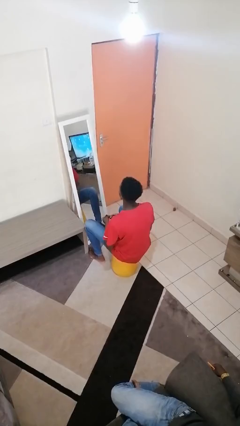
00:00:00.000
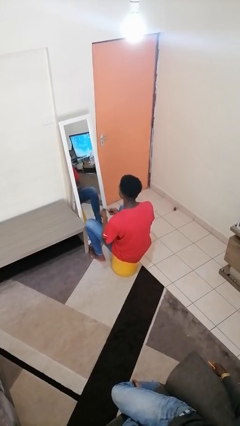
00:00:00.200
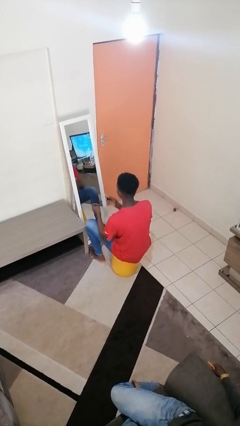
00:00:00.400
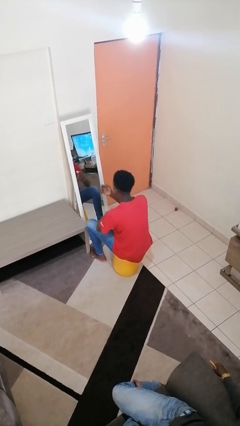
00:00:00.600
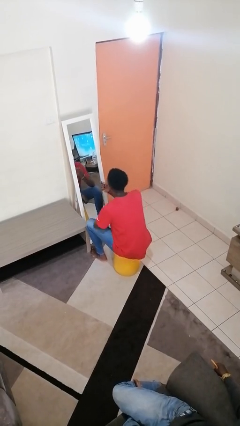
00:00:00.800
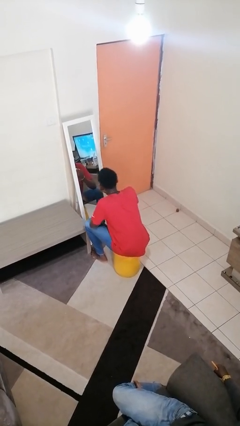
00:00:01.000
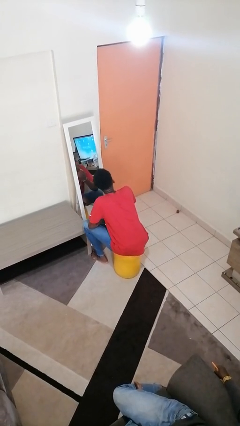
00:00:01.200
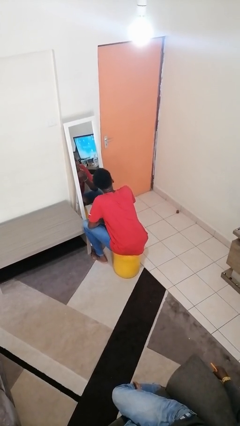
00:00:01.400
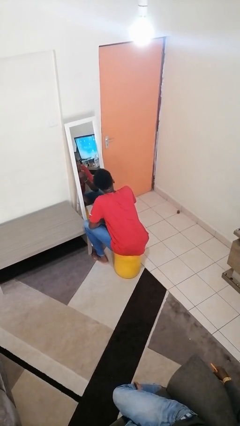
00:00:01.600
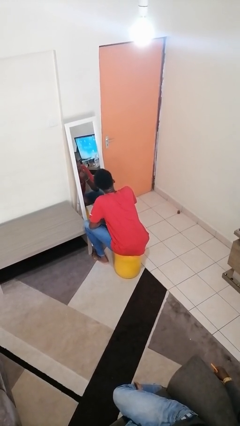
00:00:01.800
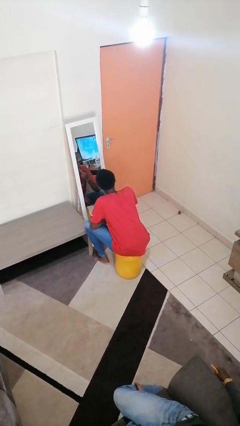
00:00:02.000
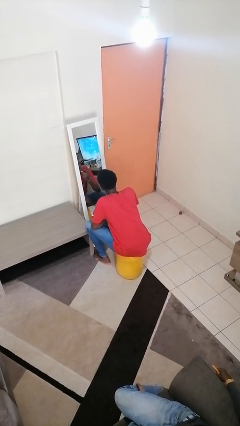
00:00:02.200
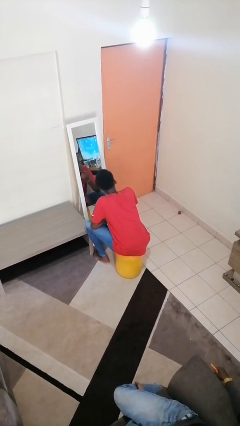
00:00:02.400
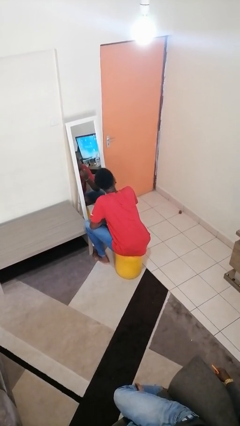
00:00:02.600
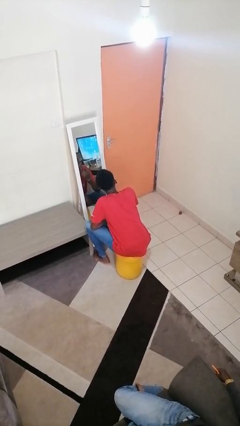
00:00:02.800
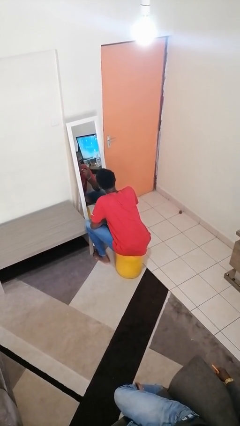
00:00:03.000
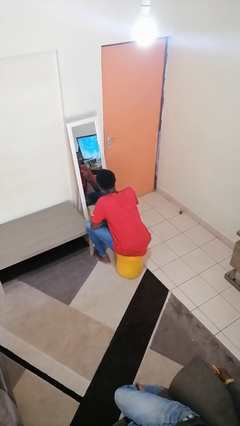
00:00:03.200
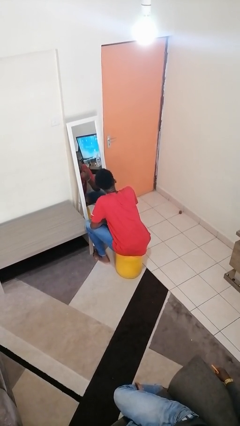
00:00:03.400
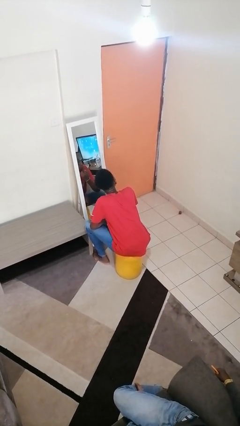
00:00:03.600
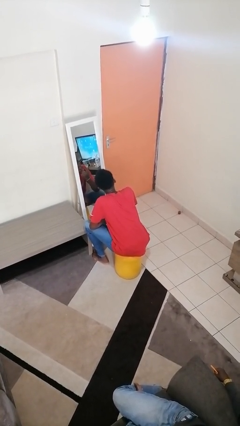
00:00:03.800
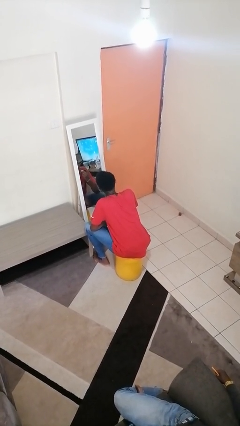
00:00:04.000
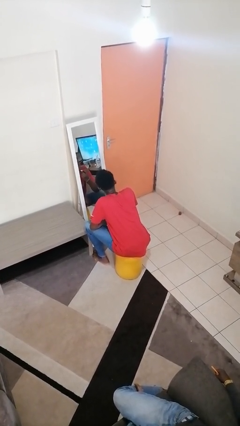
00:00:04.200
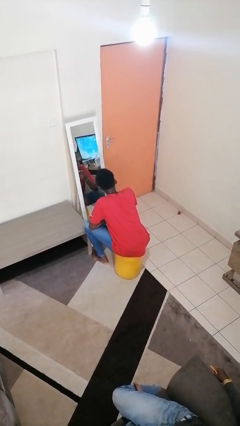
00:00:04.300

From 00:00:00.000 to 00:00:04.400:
person applies lip makeup

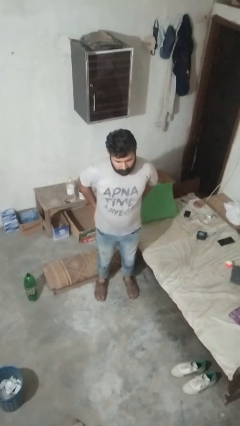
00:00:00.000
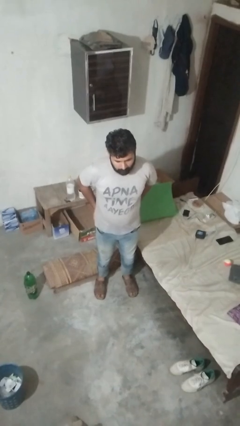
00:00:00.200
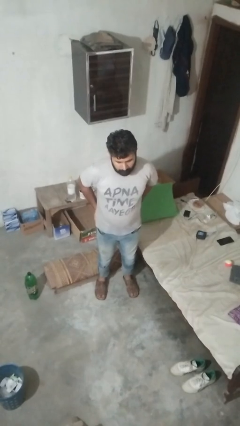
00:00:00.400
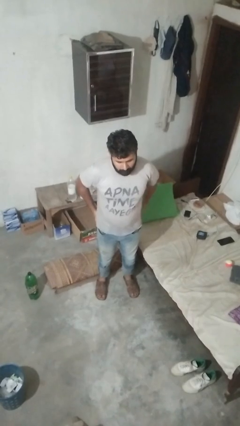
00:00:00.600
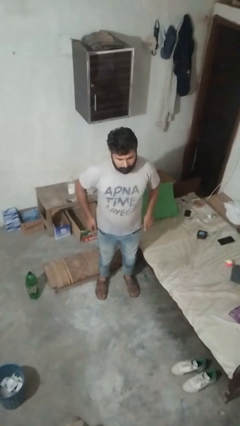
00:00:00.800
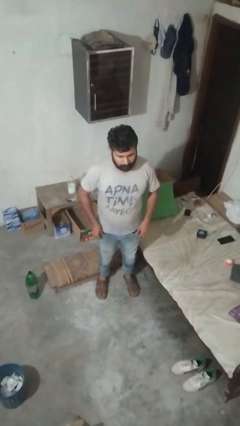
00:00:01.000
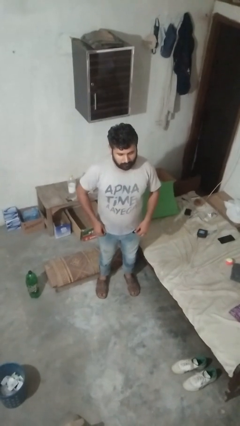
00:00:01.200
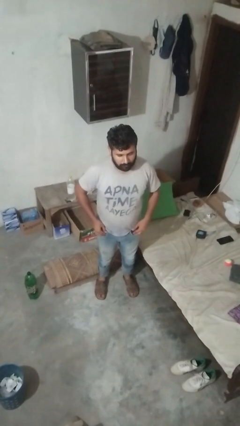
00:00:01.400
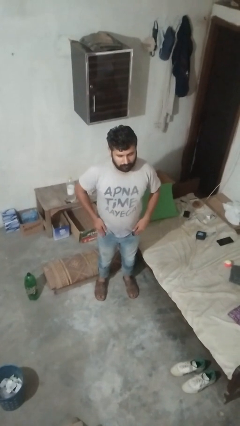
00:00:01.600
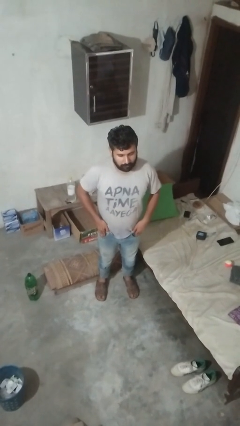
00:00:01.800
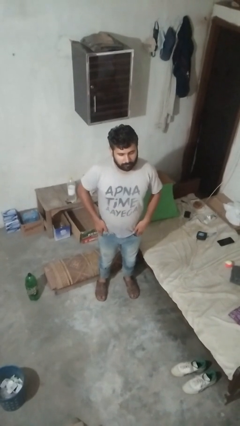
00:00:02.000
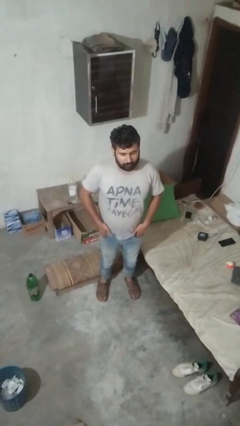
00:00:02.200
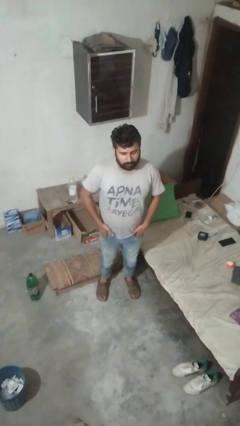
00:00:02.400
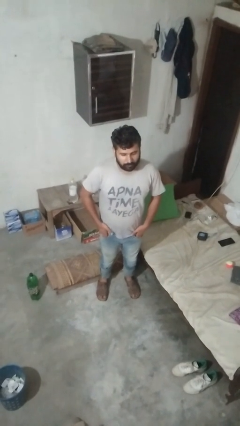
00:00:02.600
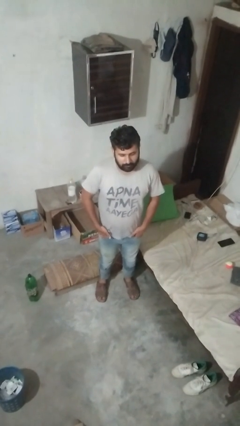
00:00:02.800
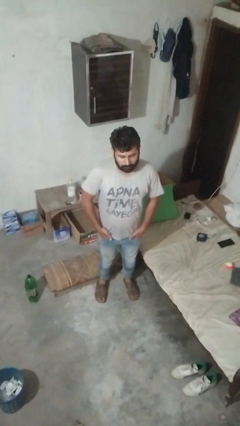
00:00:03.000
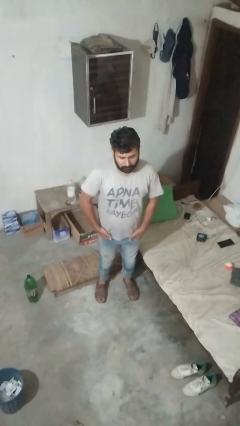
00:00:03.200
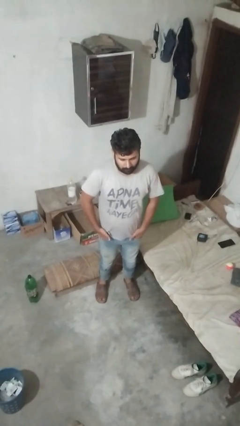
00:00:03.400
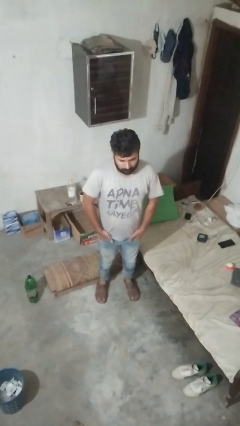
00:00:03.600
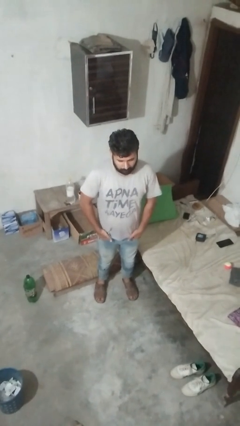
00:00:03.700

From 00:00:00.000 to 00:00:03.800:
person puts hands in back pockets

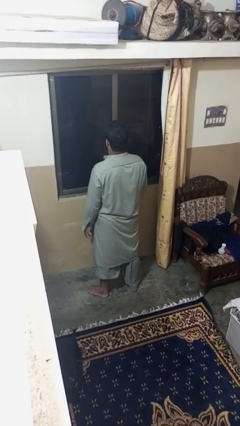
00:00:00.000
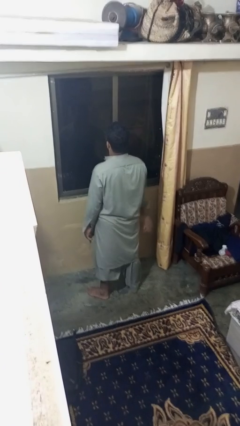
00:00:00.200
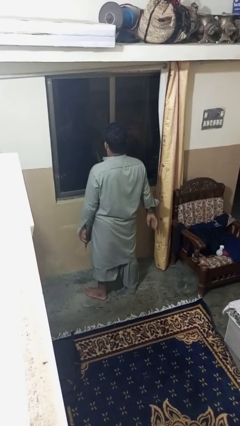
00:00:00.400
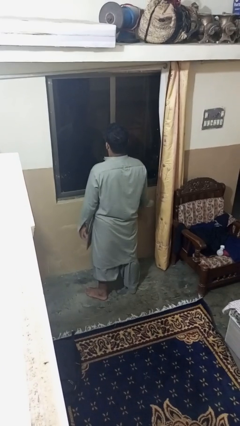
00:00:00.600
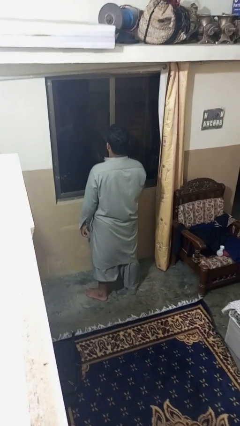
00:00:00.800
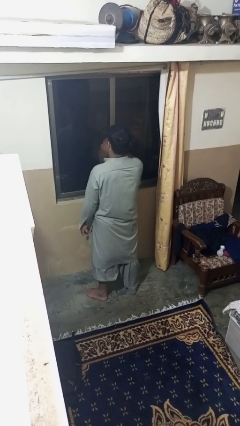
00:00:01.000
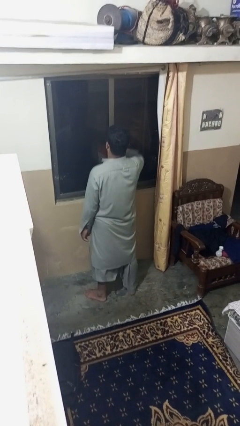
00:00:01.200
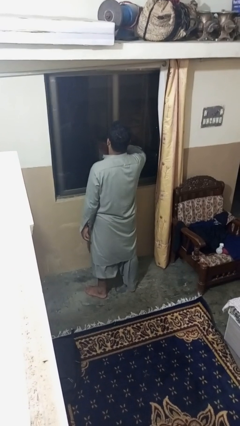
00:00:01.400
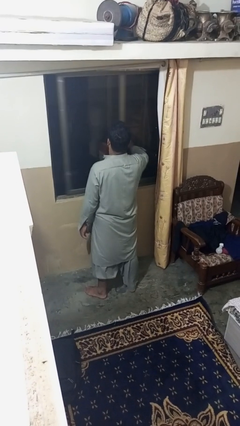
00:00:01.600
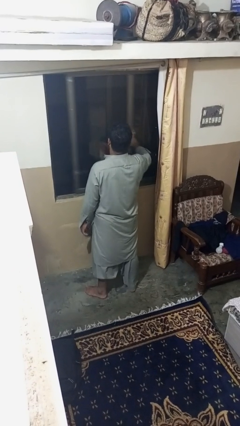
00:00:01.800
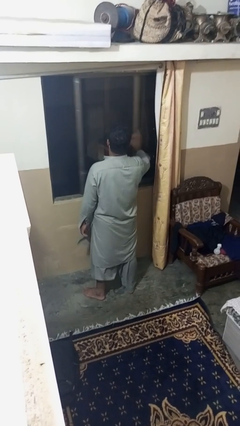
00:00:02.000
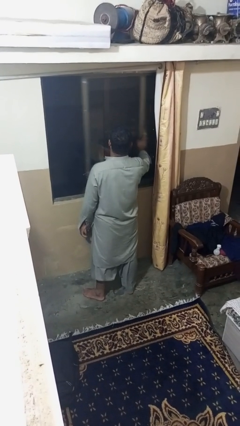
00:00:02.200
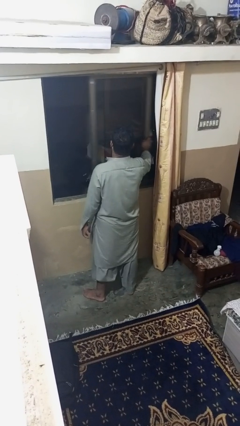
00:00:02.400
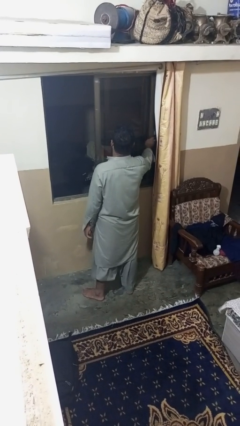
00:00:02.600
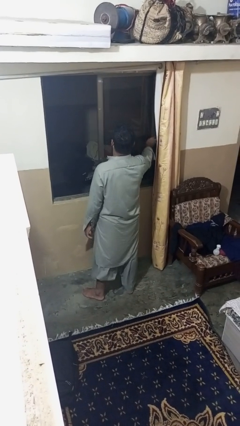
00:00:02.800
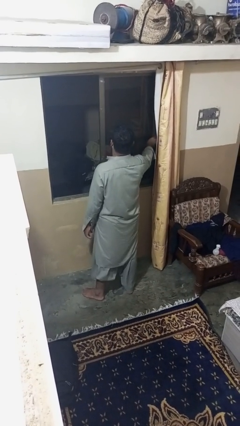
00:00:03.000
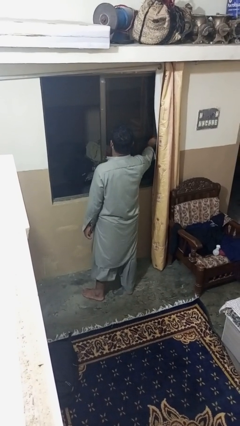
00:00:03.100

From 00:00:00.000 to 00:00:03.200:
person opens home window

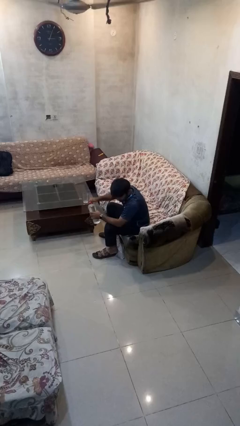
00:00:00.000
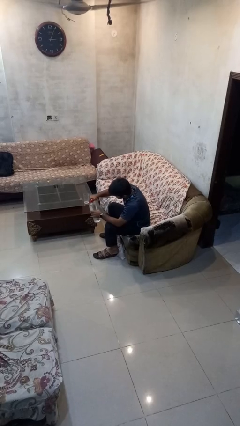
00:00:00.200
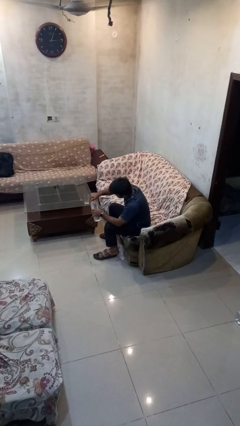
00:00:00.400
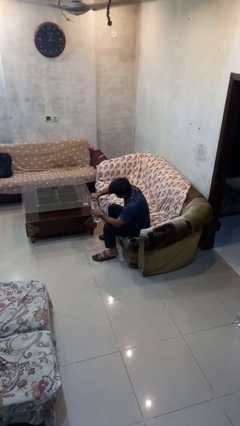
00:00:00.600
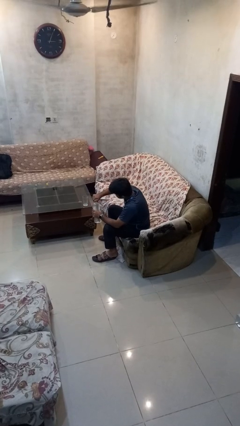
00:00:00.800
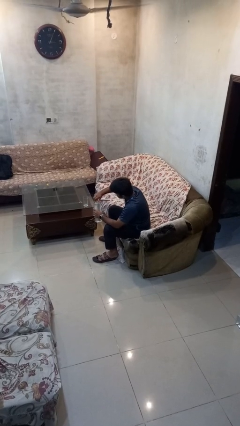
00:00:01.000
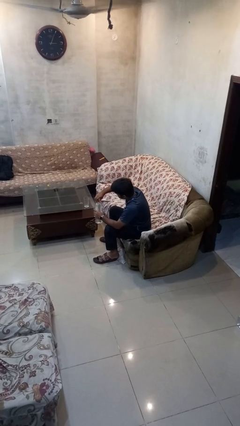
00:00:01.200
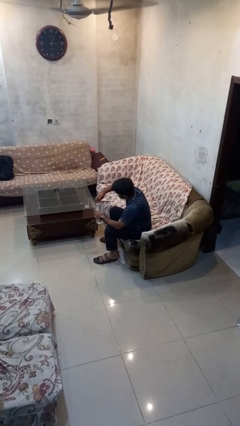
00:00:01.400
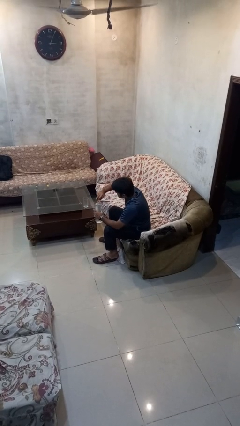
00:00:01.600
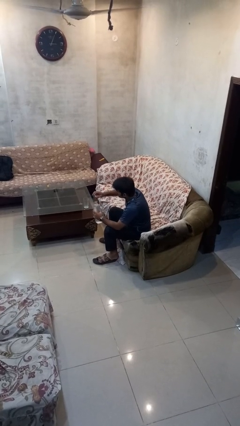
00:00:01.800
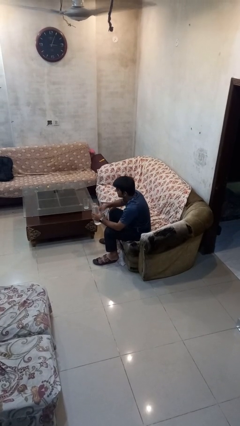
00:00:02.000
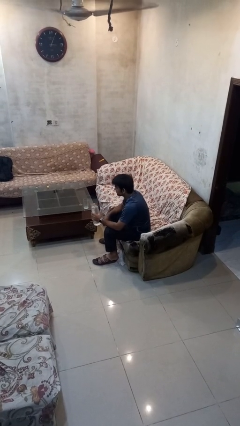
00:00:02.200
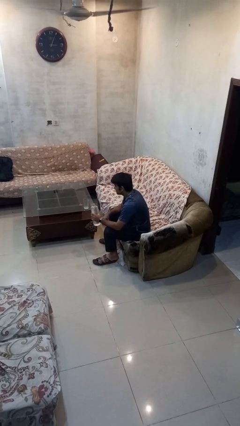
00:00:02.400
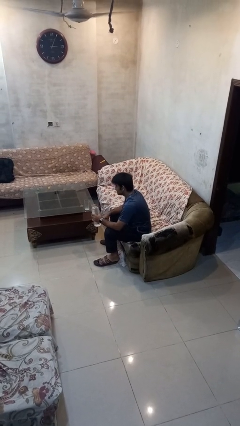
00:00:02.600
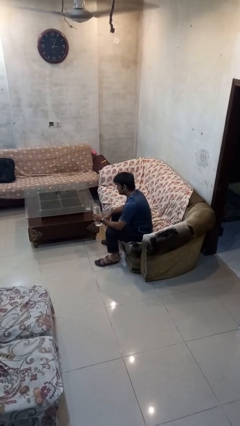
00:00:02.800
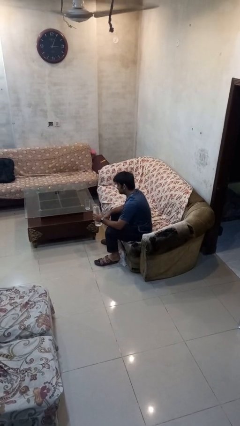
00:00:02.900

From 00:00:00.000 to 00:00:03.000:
person unscrews lid from bottle

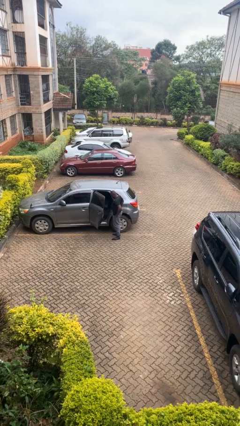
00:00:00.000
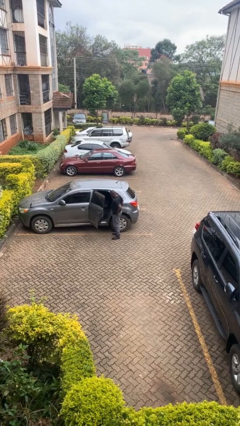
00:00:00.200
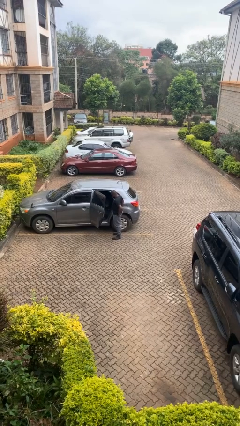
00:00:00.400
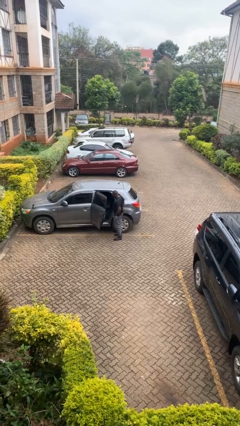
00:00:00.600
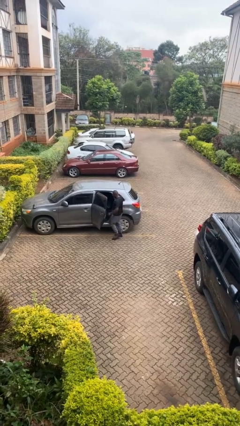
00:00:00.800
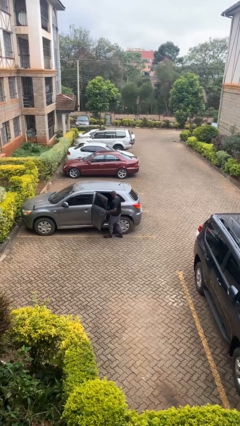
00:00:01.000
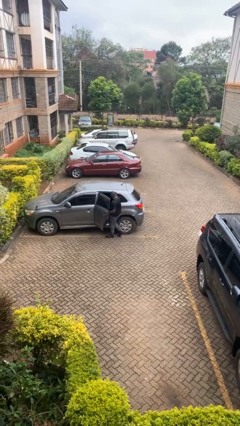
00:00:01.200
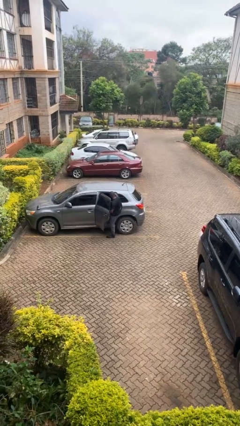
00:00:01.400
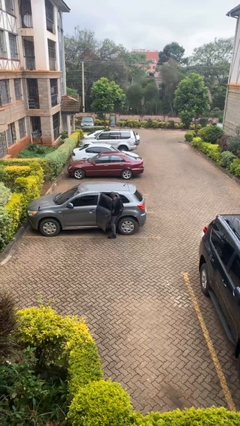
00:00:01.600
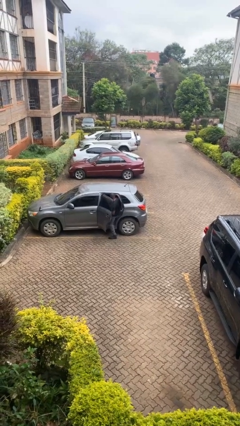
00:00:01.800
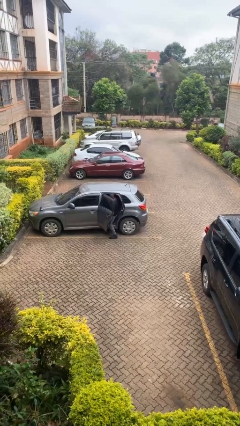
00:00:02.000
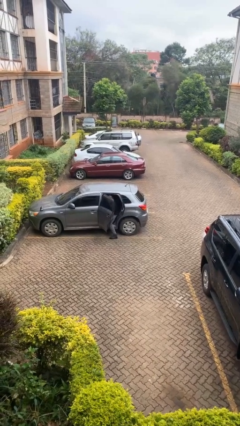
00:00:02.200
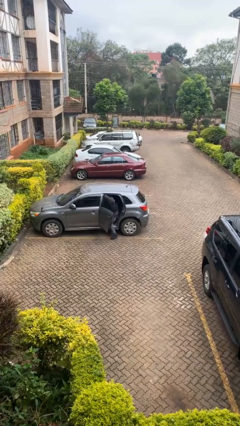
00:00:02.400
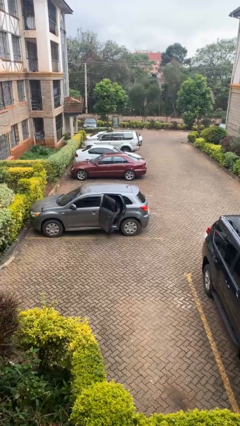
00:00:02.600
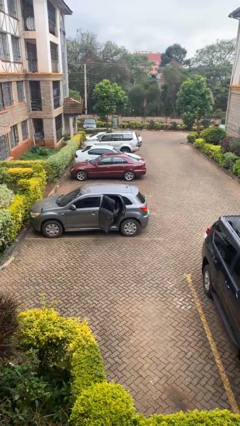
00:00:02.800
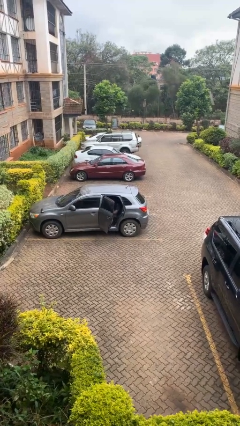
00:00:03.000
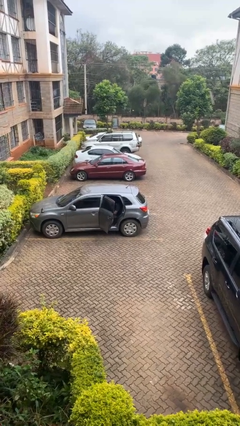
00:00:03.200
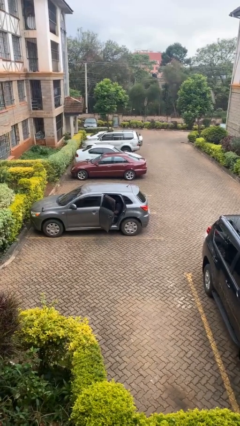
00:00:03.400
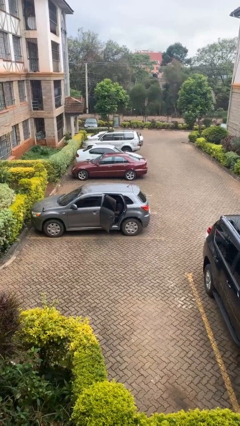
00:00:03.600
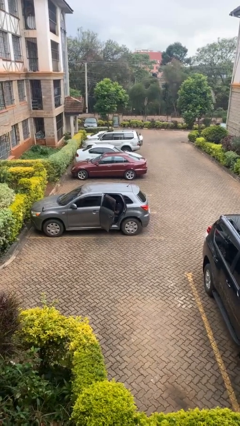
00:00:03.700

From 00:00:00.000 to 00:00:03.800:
person enters car
